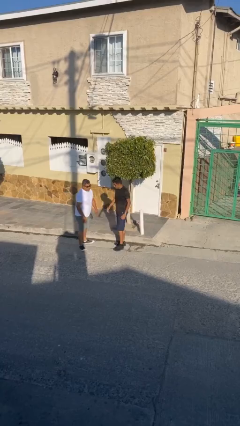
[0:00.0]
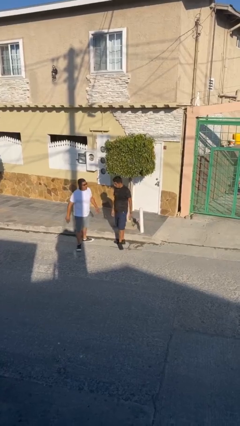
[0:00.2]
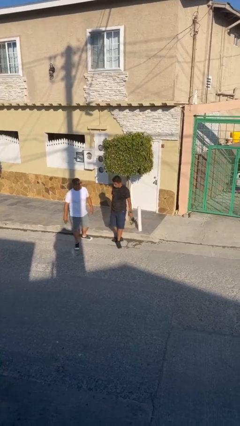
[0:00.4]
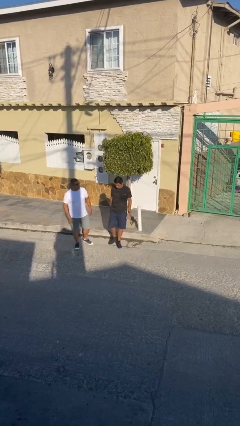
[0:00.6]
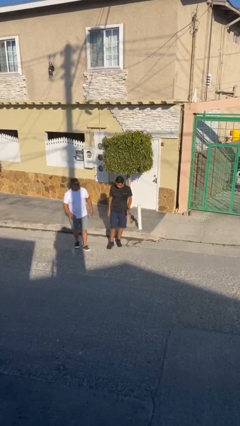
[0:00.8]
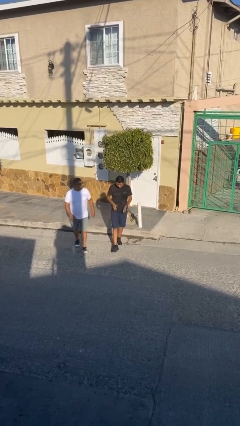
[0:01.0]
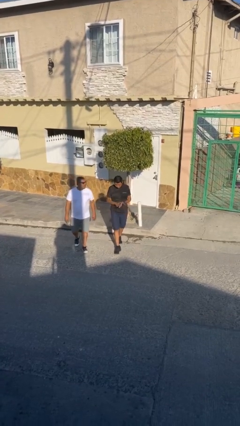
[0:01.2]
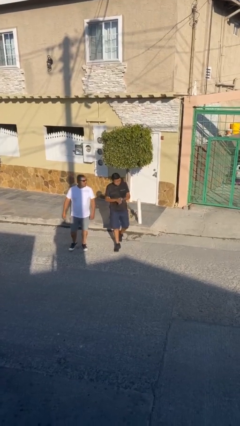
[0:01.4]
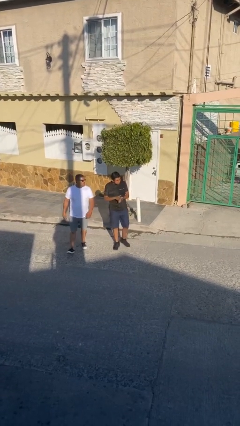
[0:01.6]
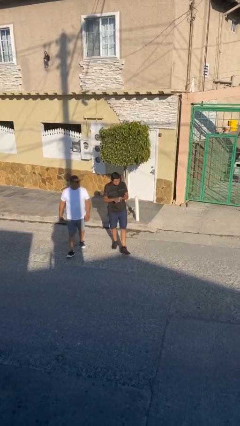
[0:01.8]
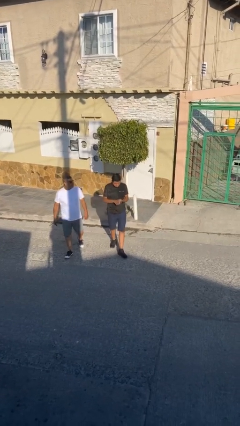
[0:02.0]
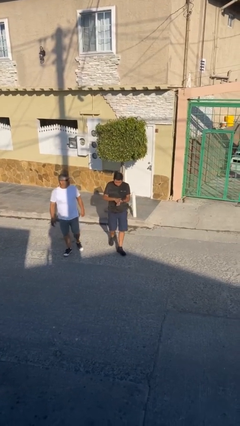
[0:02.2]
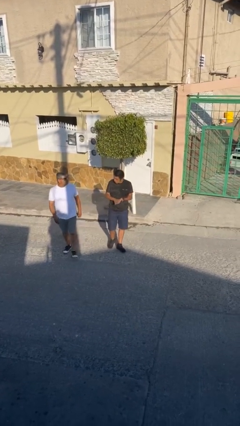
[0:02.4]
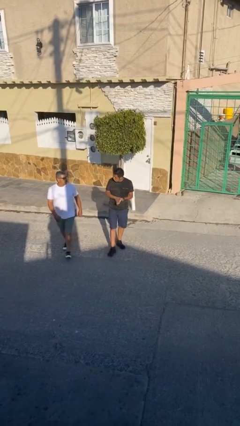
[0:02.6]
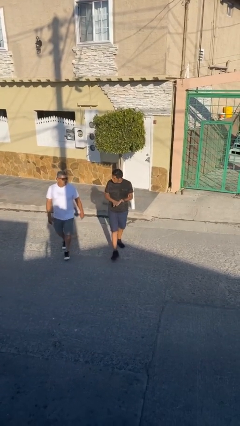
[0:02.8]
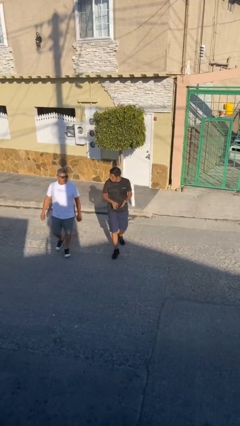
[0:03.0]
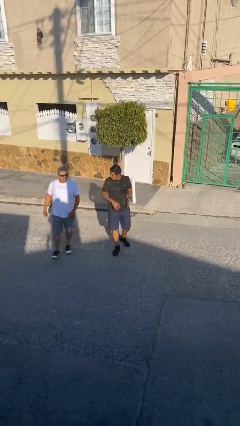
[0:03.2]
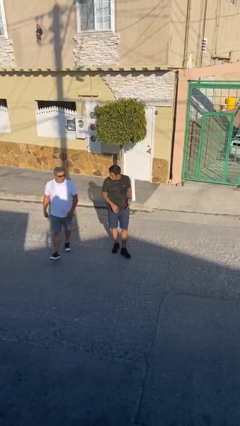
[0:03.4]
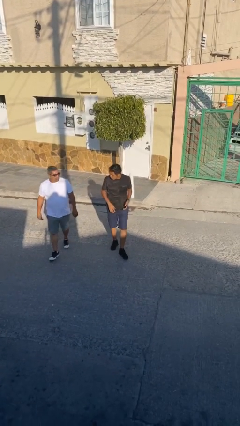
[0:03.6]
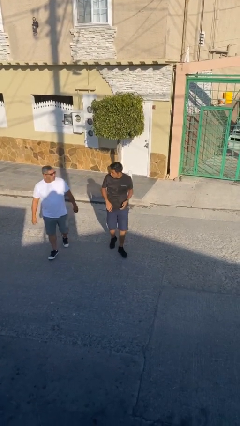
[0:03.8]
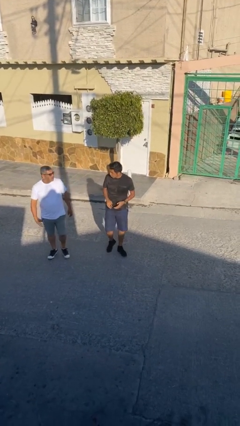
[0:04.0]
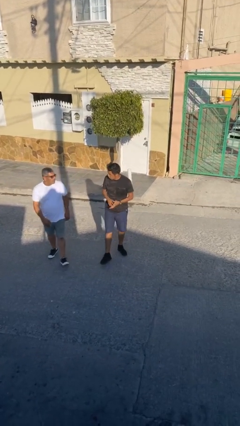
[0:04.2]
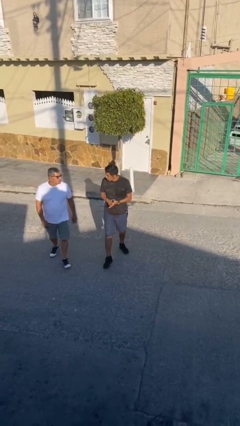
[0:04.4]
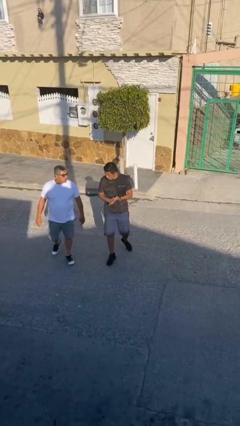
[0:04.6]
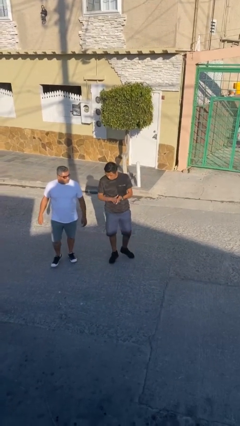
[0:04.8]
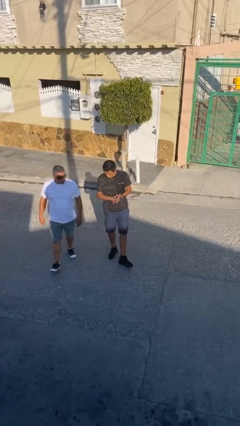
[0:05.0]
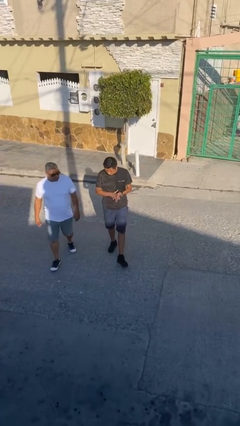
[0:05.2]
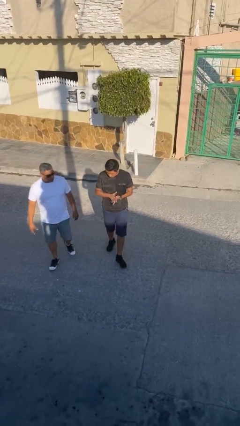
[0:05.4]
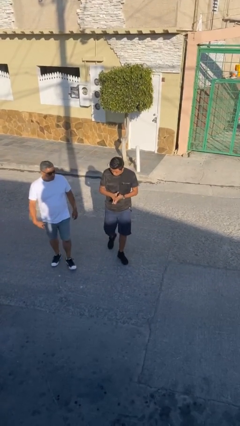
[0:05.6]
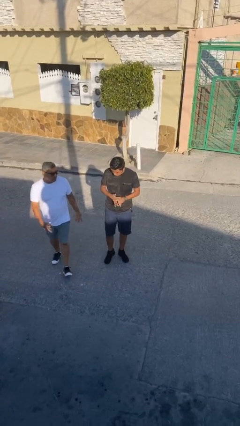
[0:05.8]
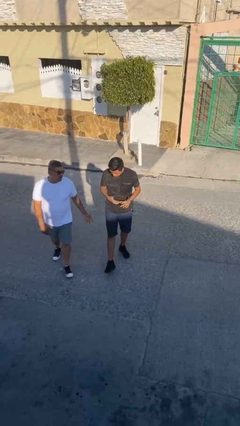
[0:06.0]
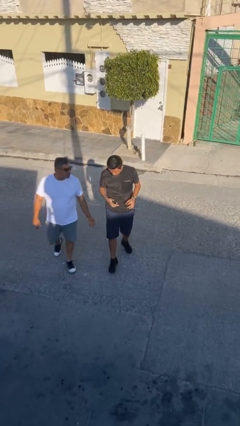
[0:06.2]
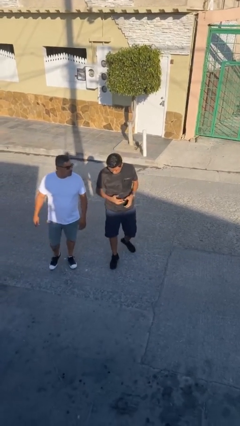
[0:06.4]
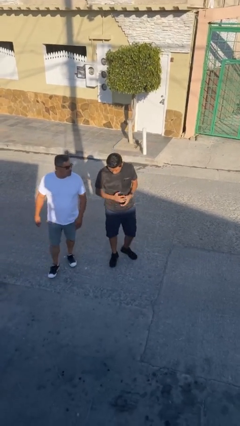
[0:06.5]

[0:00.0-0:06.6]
person talks to person

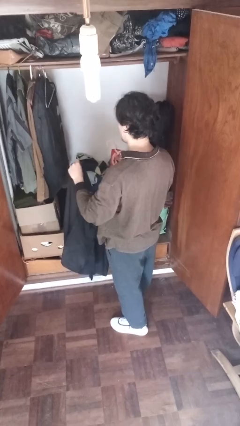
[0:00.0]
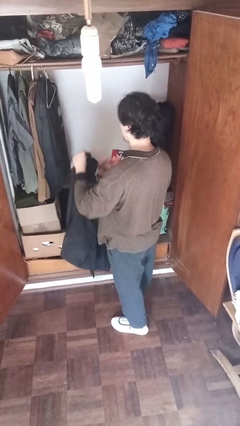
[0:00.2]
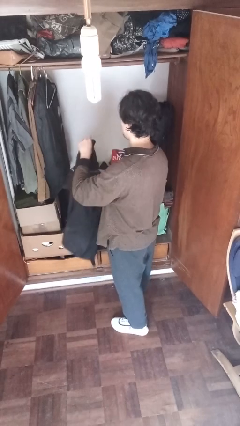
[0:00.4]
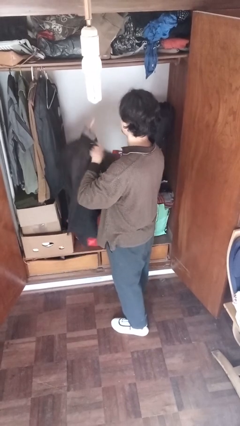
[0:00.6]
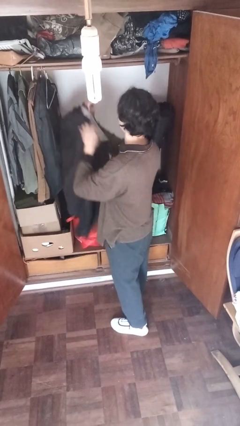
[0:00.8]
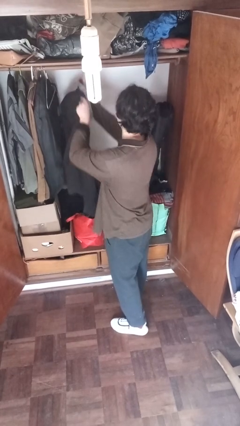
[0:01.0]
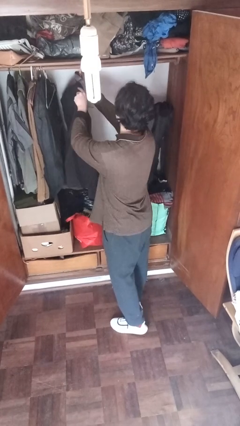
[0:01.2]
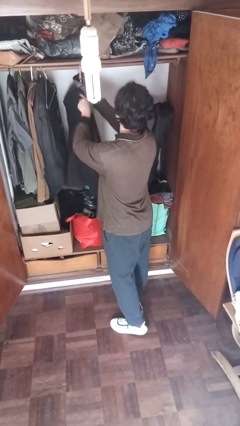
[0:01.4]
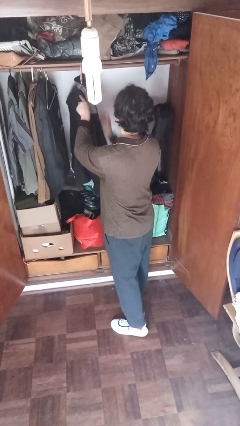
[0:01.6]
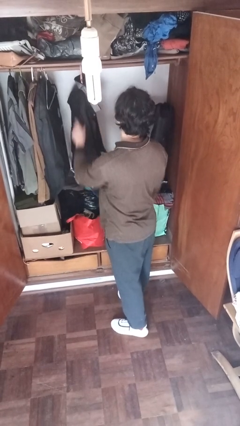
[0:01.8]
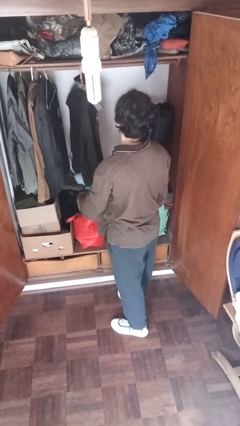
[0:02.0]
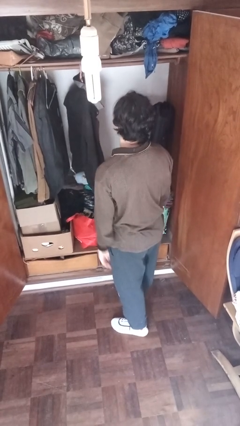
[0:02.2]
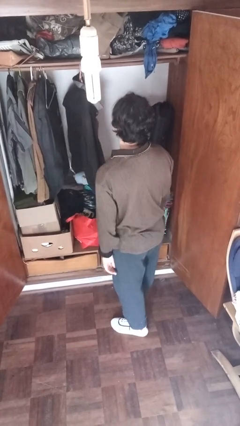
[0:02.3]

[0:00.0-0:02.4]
person puts clothes into closet

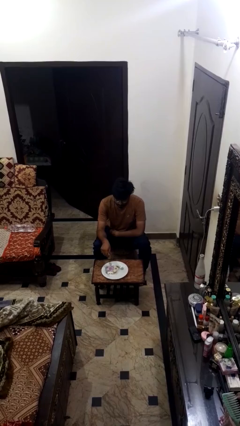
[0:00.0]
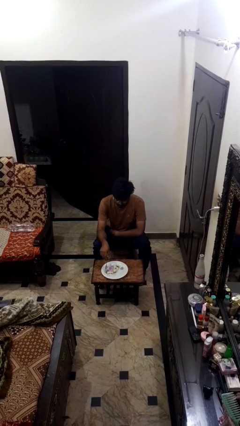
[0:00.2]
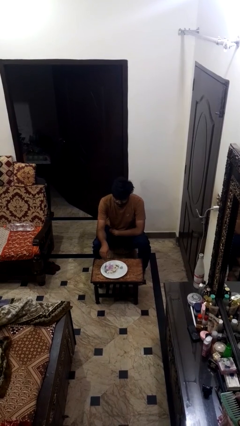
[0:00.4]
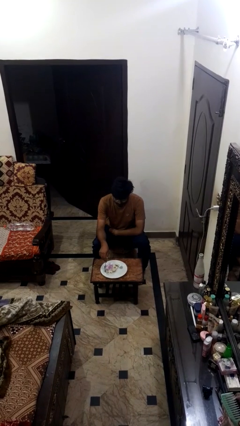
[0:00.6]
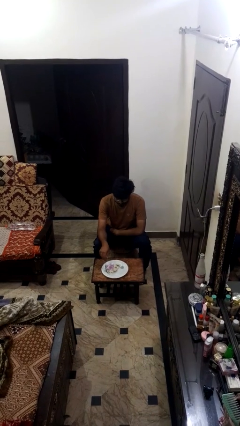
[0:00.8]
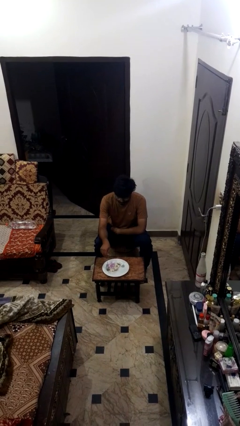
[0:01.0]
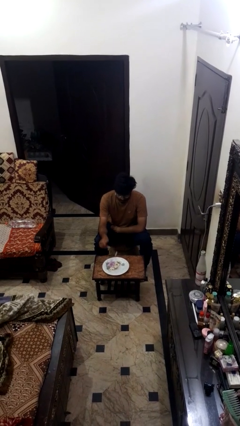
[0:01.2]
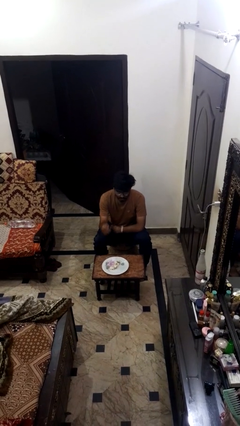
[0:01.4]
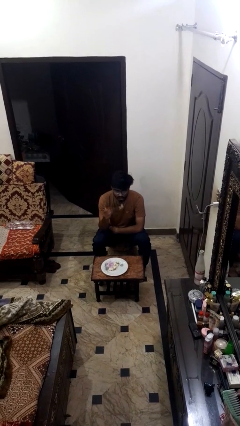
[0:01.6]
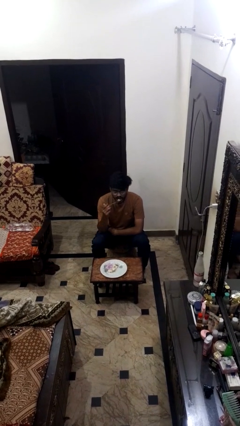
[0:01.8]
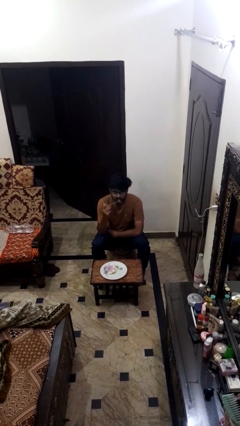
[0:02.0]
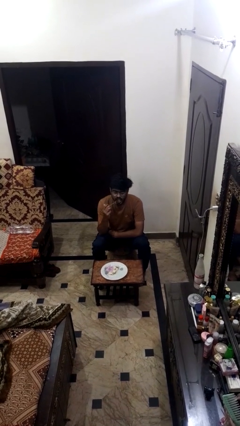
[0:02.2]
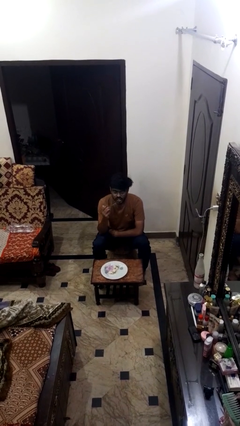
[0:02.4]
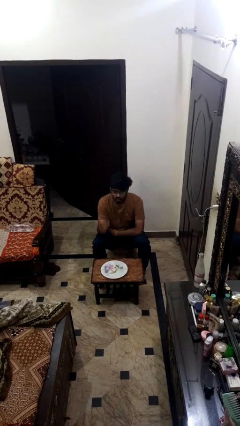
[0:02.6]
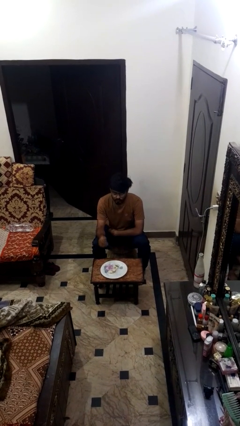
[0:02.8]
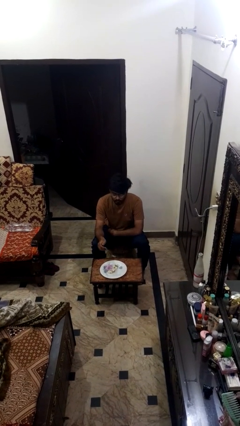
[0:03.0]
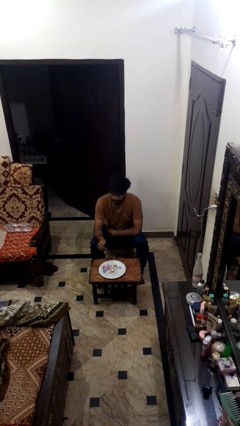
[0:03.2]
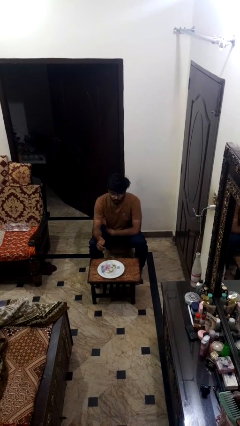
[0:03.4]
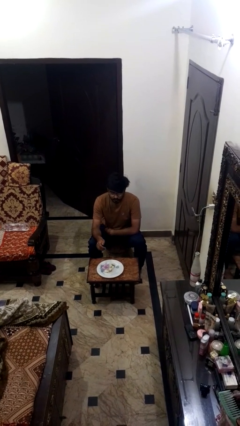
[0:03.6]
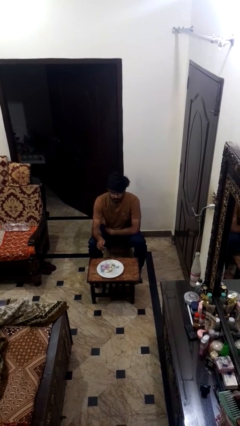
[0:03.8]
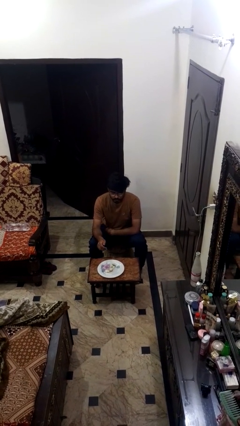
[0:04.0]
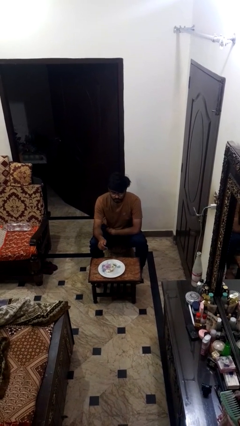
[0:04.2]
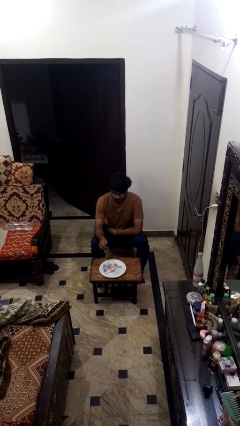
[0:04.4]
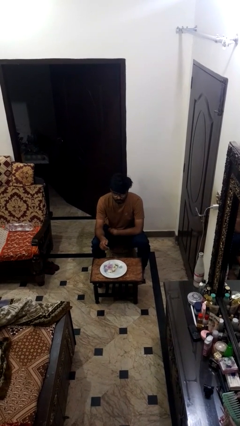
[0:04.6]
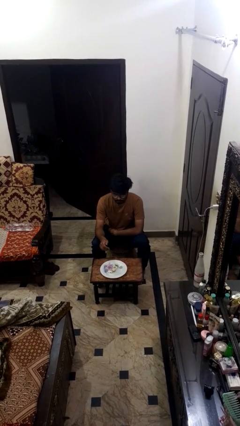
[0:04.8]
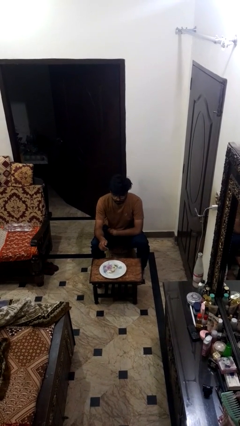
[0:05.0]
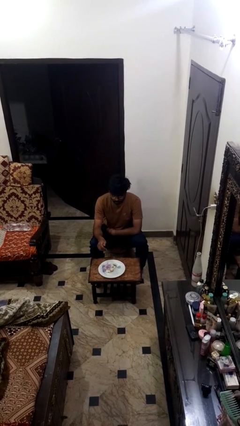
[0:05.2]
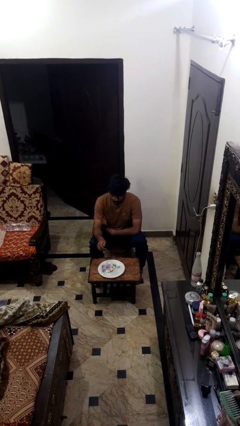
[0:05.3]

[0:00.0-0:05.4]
person eats with utensil

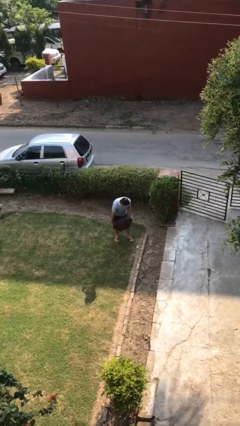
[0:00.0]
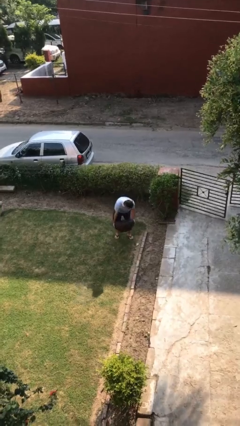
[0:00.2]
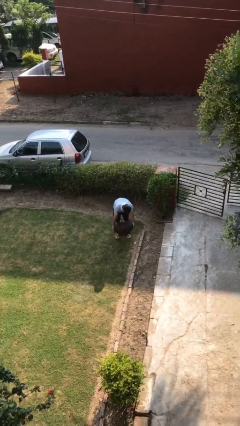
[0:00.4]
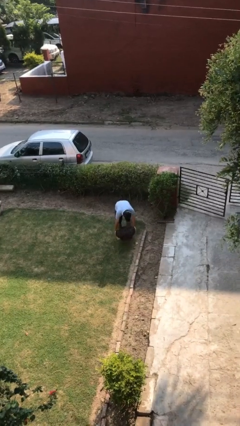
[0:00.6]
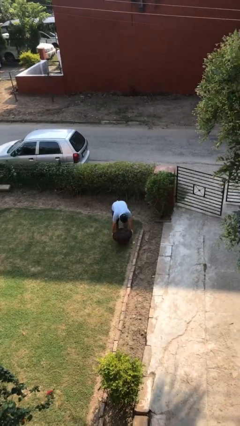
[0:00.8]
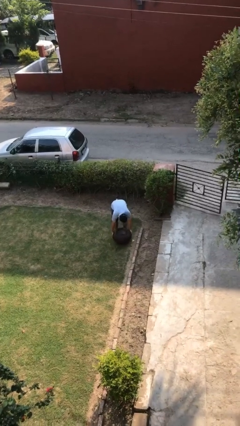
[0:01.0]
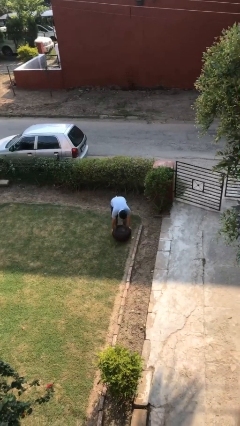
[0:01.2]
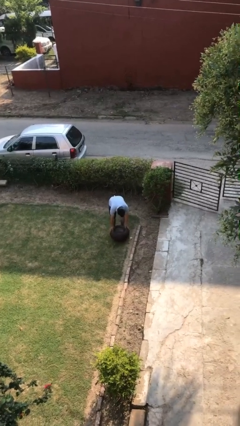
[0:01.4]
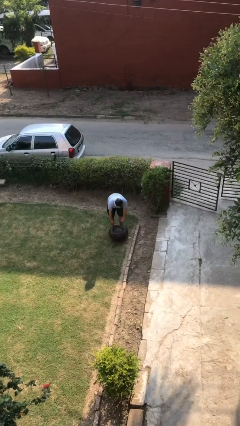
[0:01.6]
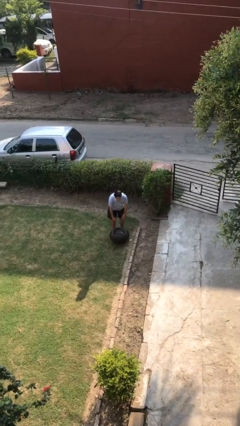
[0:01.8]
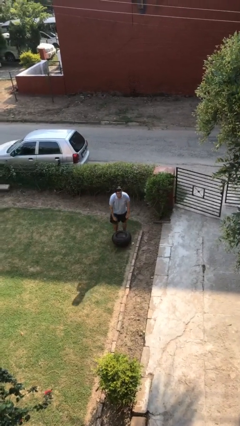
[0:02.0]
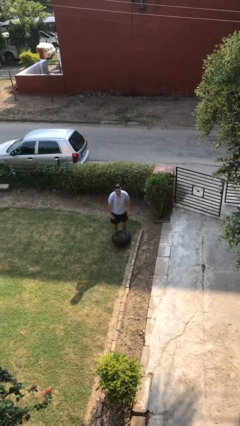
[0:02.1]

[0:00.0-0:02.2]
person puts down object on floor

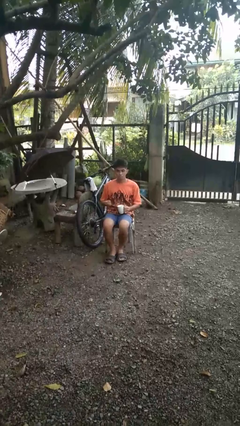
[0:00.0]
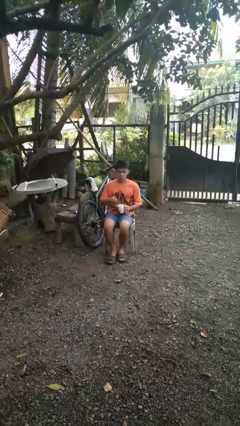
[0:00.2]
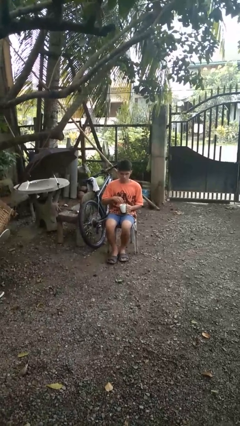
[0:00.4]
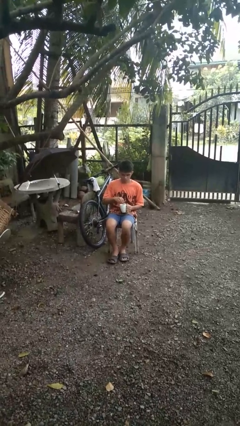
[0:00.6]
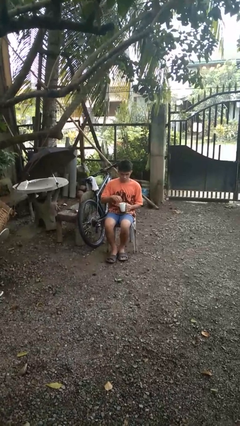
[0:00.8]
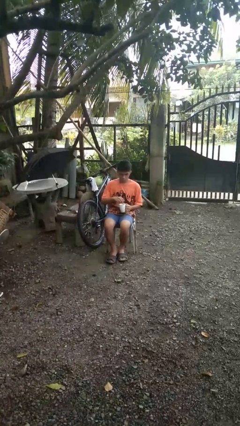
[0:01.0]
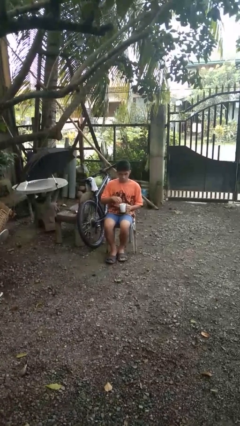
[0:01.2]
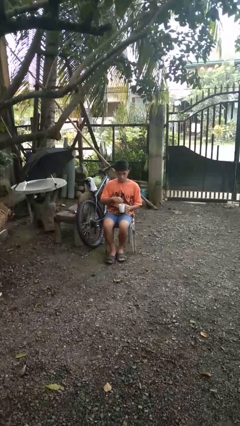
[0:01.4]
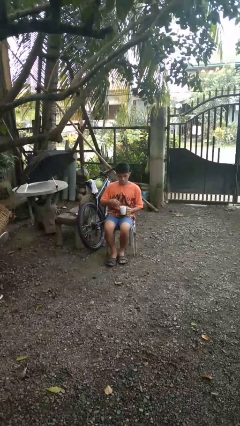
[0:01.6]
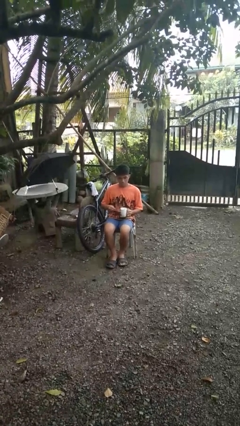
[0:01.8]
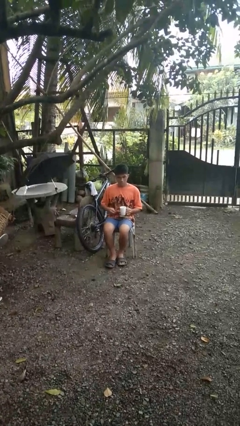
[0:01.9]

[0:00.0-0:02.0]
person stirs mug
